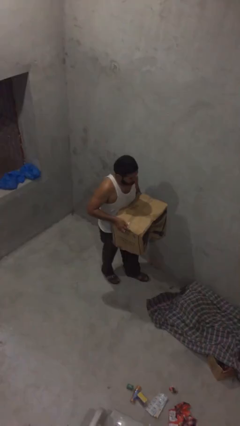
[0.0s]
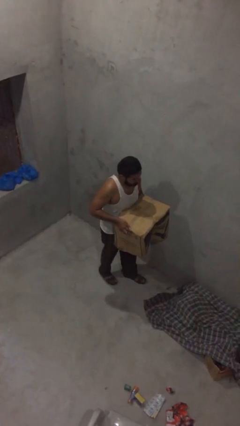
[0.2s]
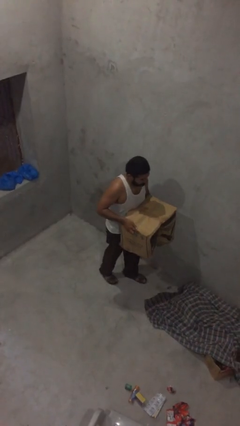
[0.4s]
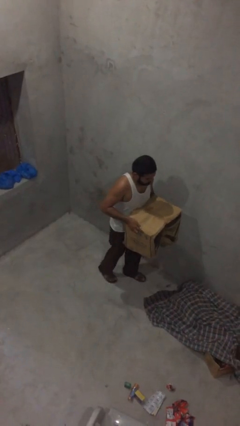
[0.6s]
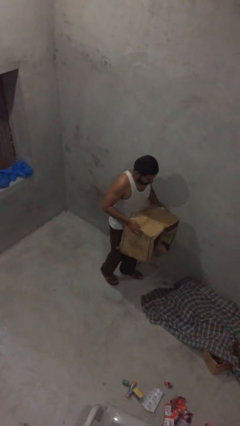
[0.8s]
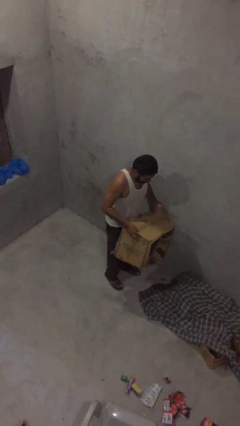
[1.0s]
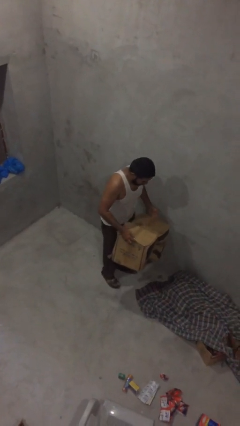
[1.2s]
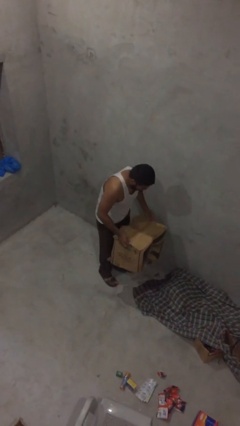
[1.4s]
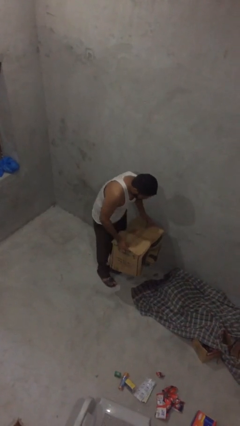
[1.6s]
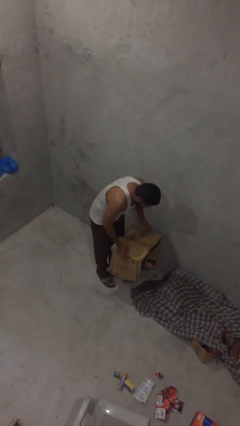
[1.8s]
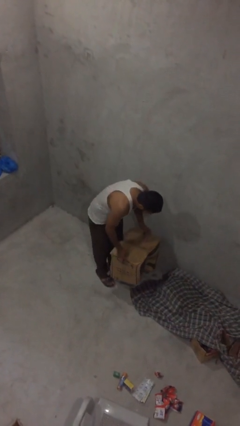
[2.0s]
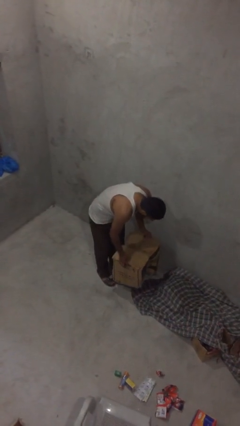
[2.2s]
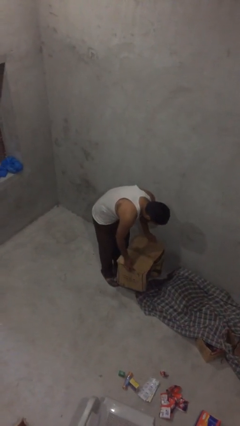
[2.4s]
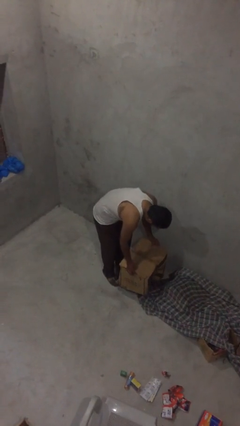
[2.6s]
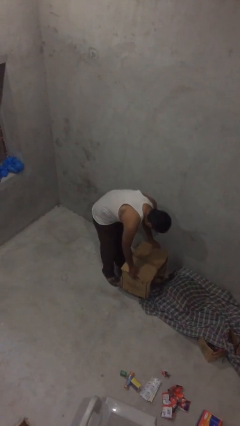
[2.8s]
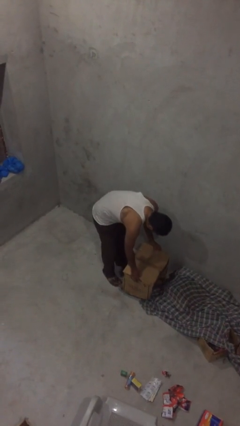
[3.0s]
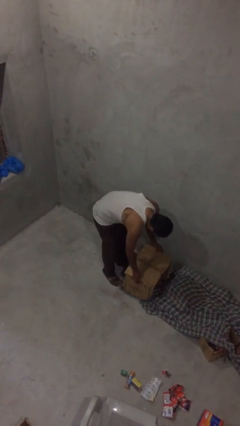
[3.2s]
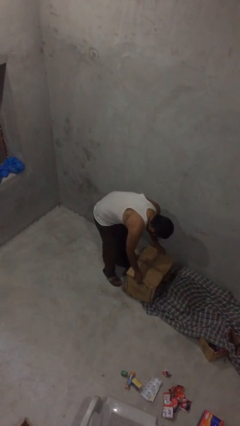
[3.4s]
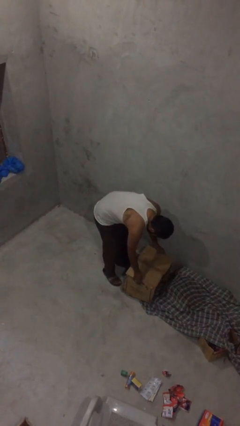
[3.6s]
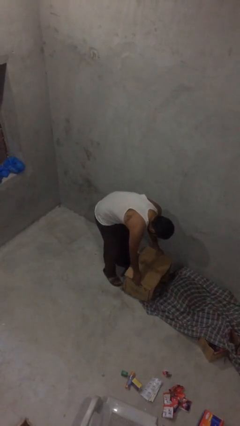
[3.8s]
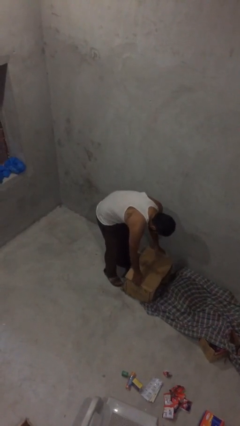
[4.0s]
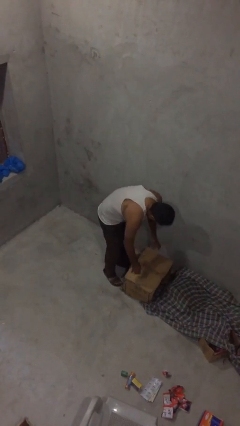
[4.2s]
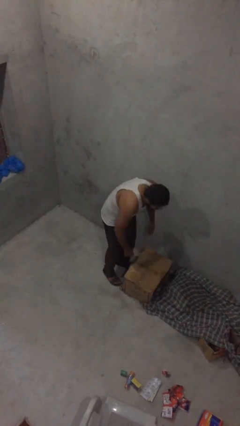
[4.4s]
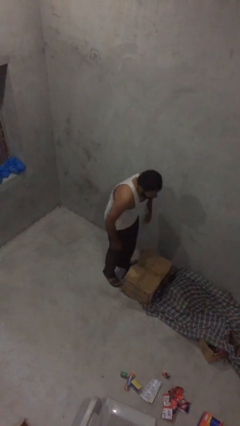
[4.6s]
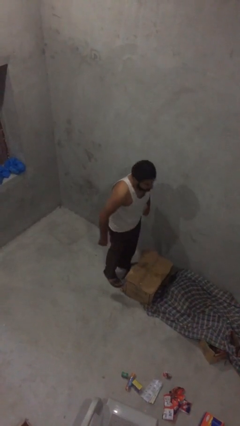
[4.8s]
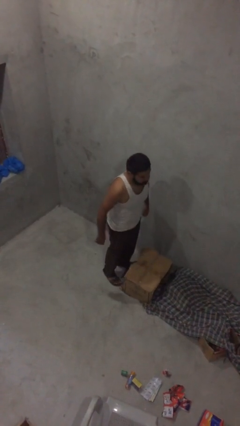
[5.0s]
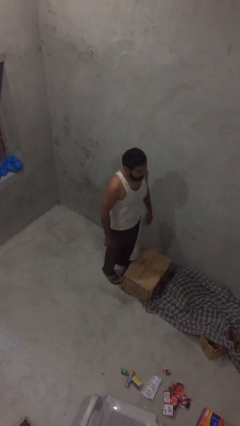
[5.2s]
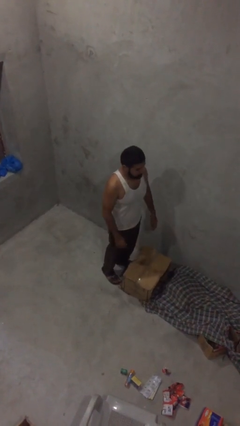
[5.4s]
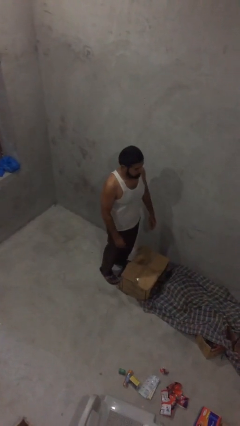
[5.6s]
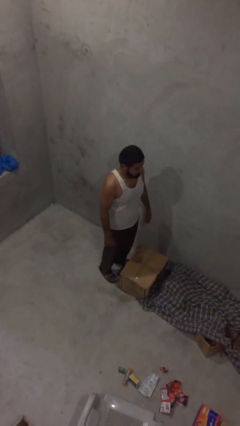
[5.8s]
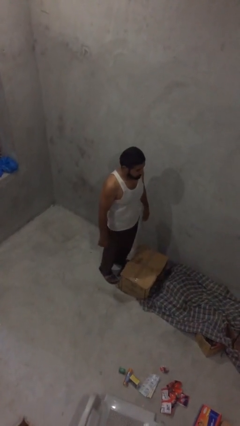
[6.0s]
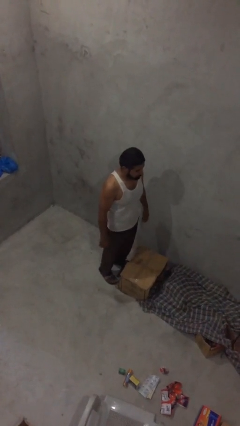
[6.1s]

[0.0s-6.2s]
person puts down object on floor

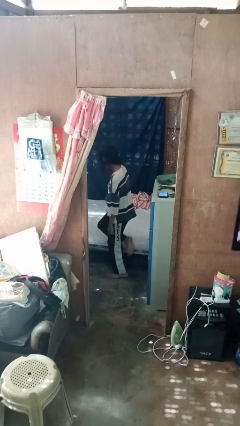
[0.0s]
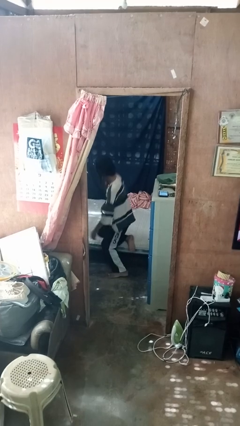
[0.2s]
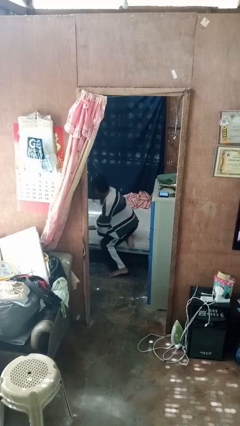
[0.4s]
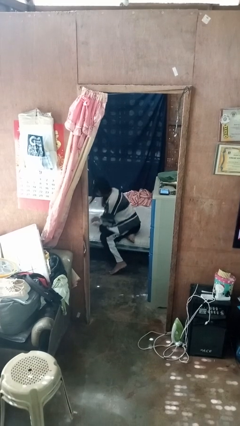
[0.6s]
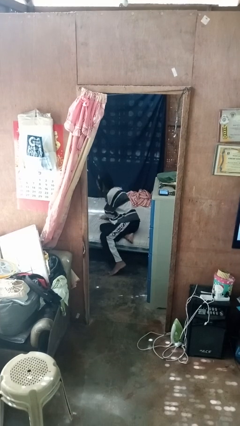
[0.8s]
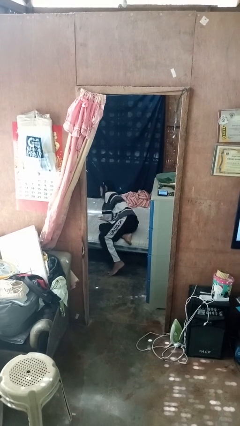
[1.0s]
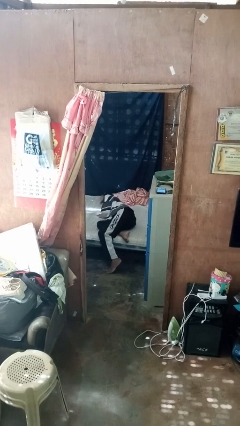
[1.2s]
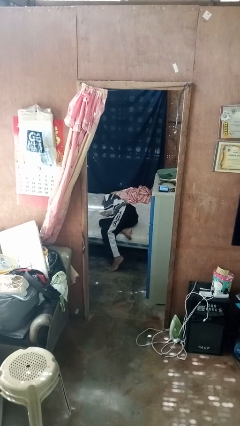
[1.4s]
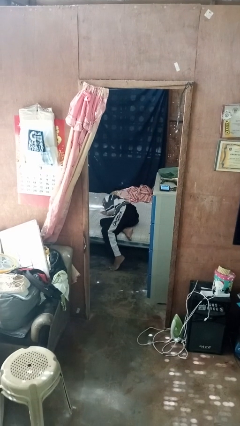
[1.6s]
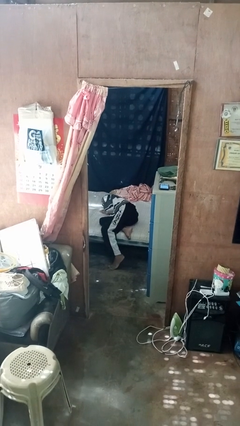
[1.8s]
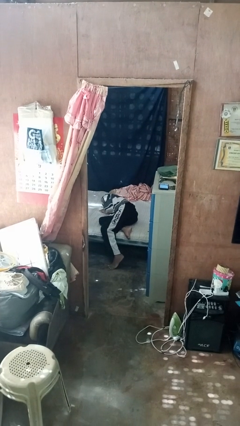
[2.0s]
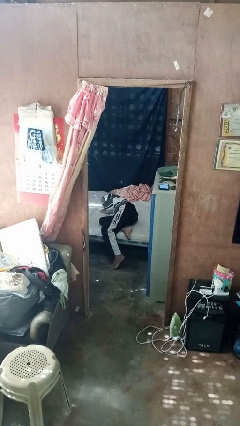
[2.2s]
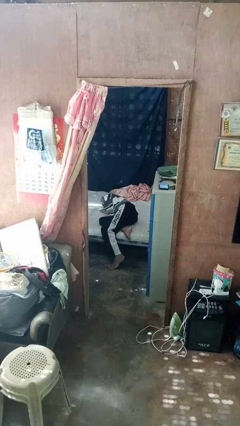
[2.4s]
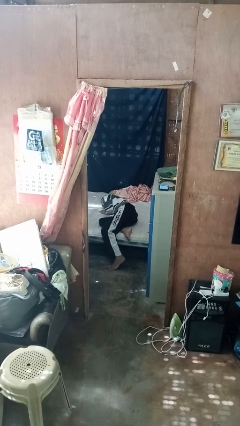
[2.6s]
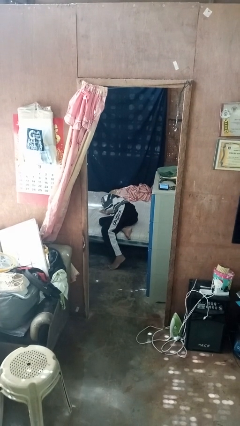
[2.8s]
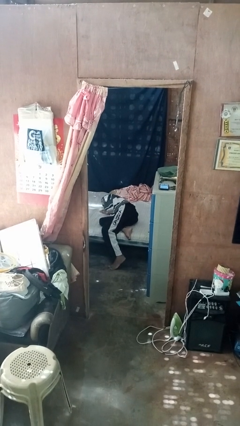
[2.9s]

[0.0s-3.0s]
person lies down on bed

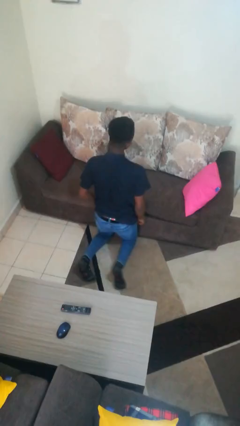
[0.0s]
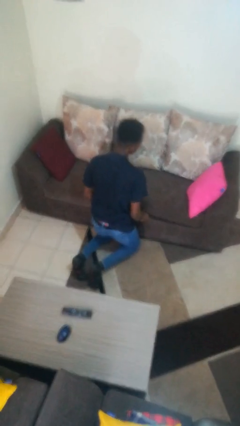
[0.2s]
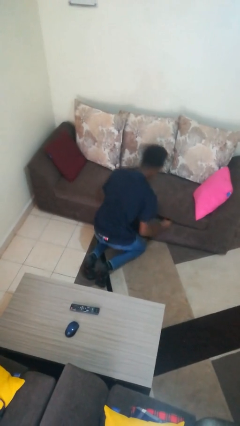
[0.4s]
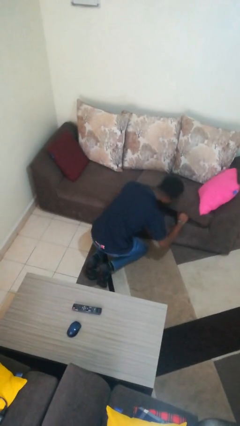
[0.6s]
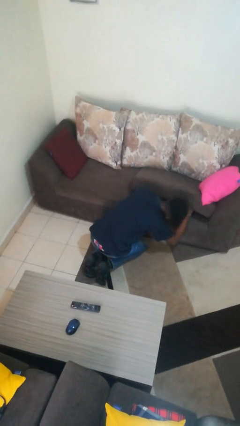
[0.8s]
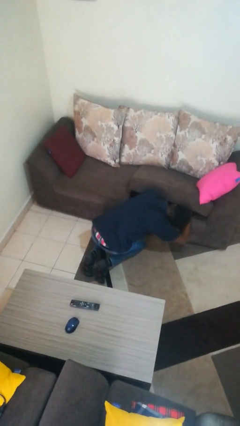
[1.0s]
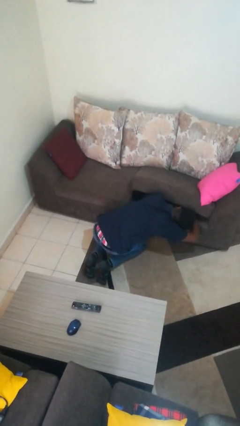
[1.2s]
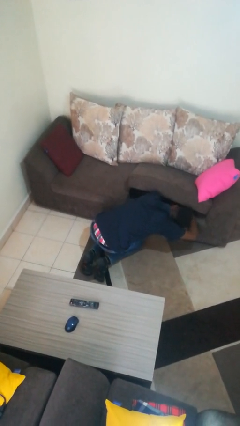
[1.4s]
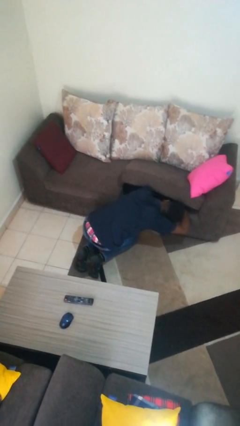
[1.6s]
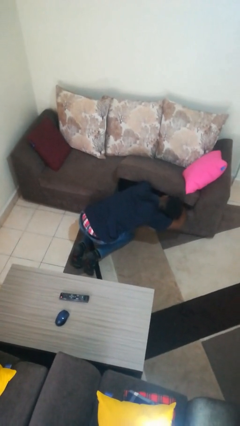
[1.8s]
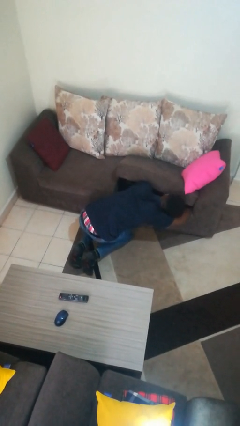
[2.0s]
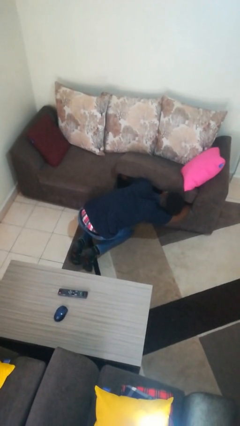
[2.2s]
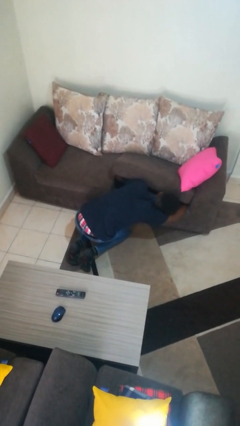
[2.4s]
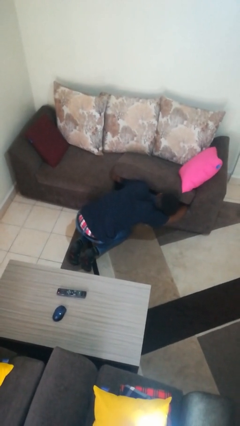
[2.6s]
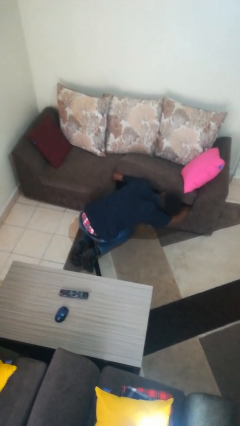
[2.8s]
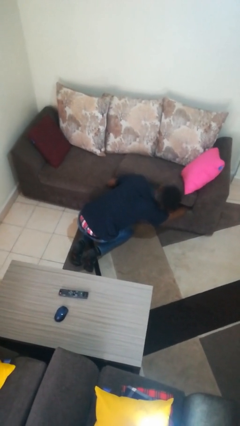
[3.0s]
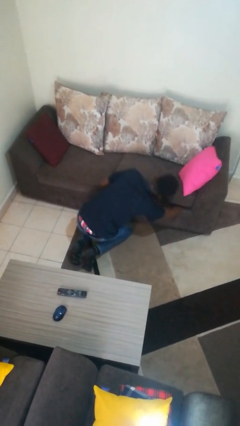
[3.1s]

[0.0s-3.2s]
person searches under couch

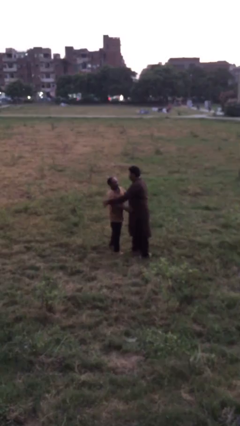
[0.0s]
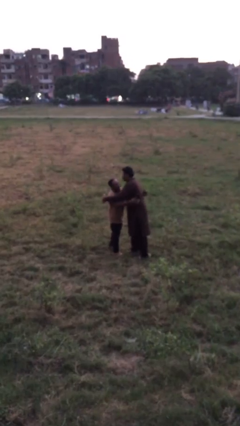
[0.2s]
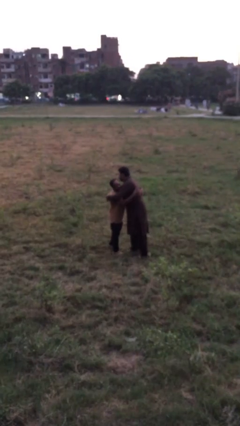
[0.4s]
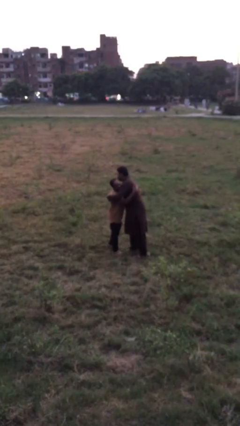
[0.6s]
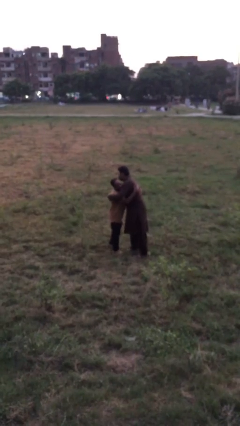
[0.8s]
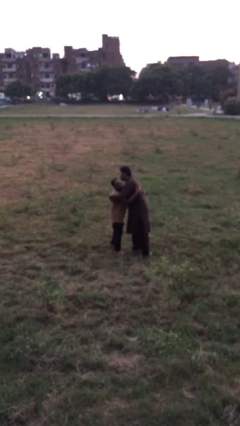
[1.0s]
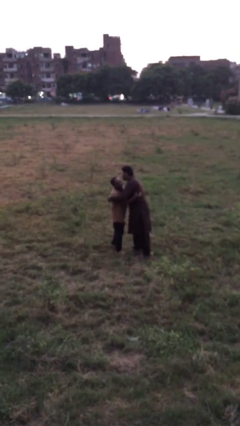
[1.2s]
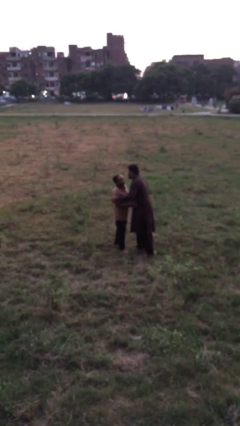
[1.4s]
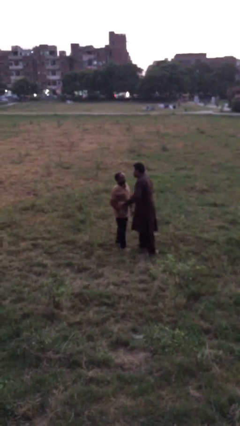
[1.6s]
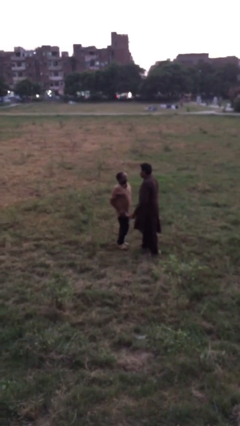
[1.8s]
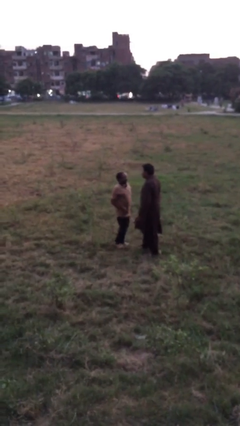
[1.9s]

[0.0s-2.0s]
person embraces person

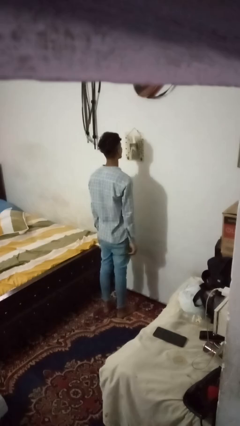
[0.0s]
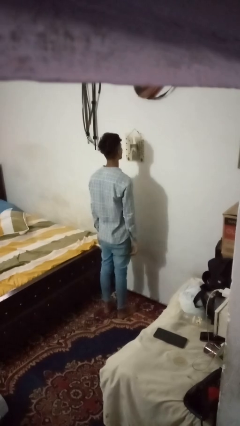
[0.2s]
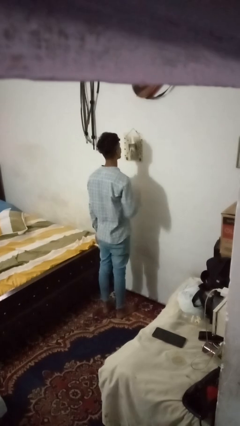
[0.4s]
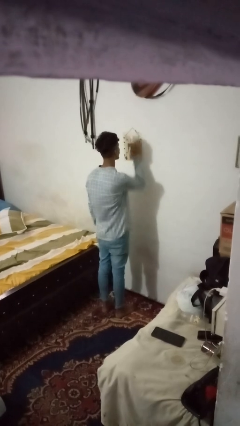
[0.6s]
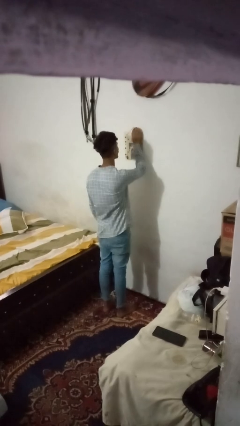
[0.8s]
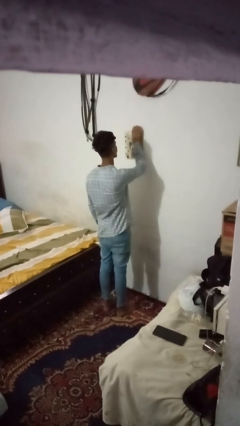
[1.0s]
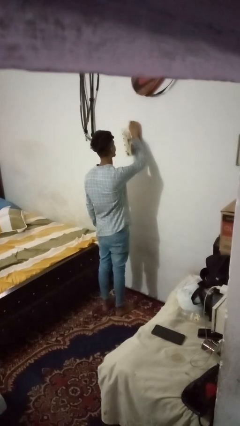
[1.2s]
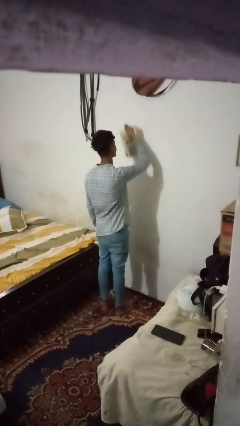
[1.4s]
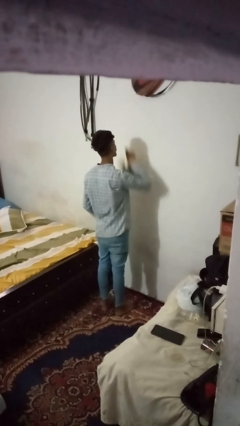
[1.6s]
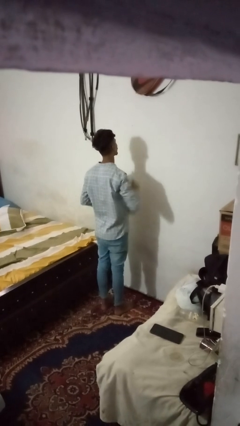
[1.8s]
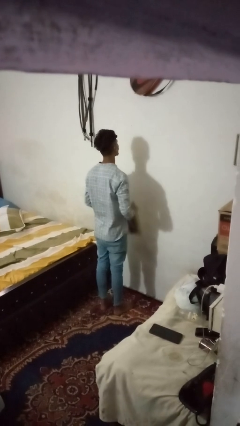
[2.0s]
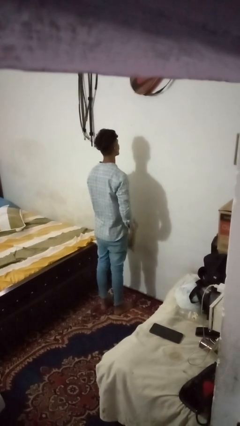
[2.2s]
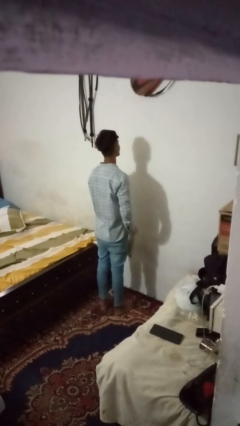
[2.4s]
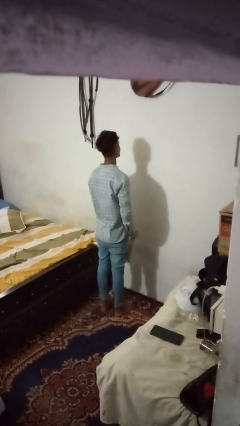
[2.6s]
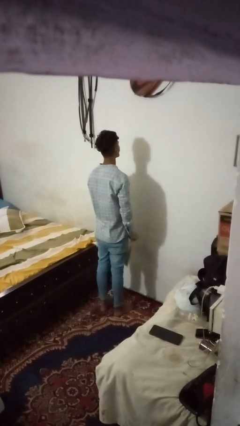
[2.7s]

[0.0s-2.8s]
person takes down picture frame
